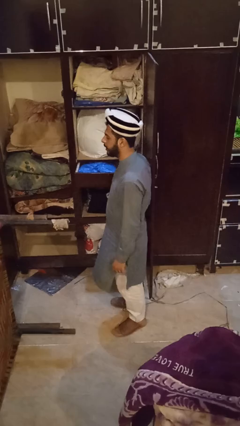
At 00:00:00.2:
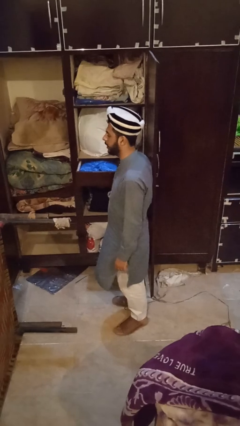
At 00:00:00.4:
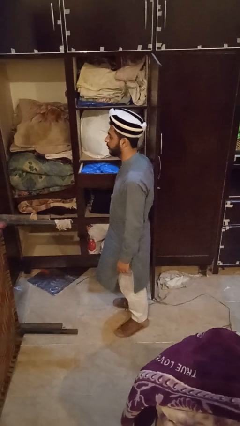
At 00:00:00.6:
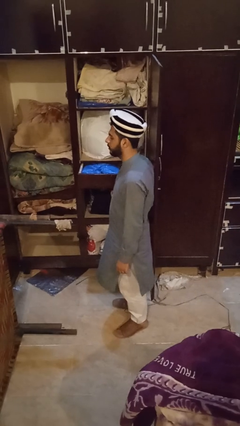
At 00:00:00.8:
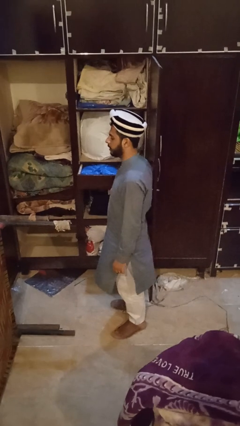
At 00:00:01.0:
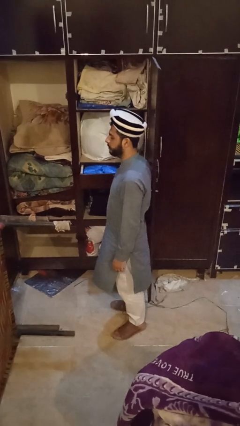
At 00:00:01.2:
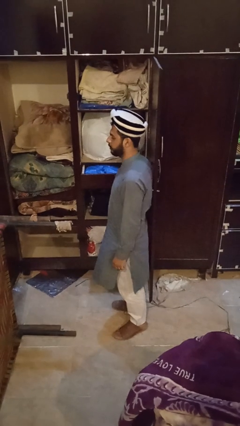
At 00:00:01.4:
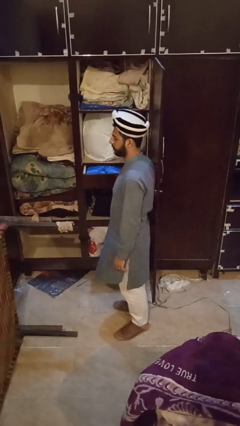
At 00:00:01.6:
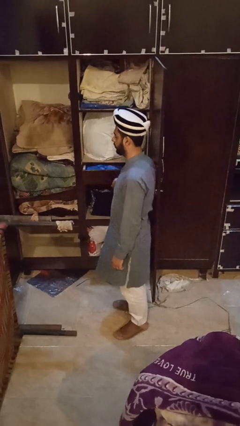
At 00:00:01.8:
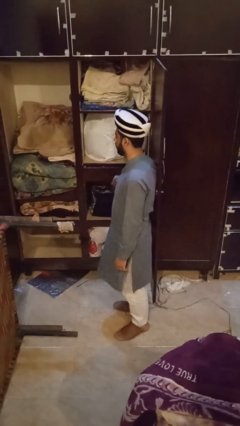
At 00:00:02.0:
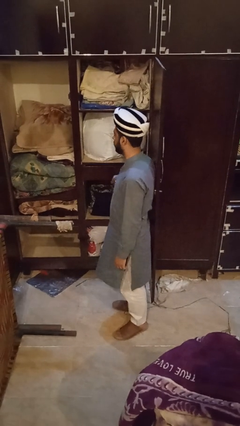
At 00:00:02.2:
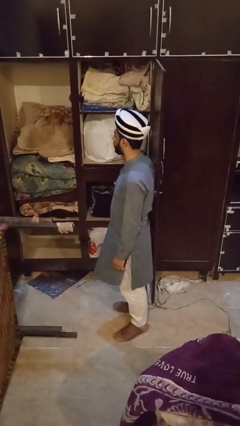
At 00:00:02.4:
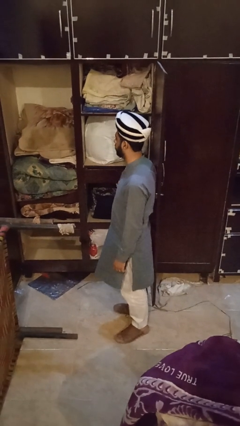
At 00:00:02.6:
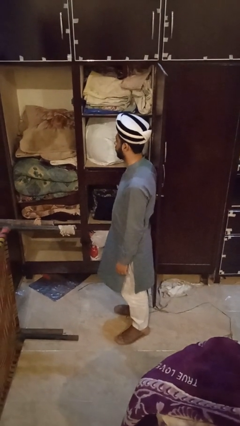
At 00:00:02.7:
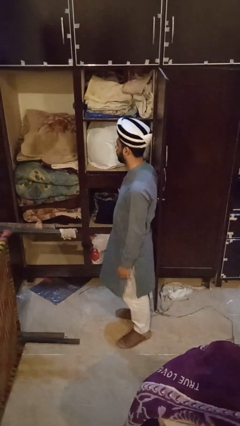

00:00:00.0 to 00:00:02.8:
person closes dresser drawer

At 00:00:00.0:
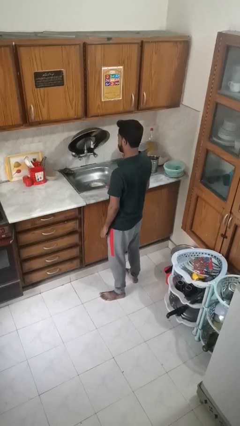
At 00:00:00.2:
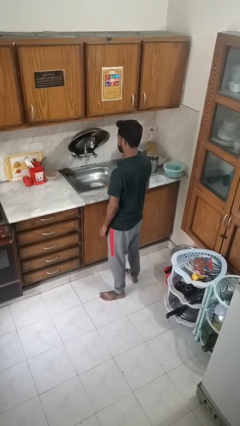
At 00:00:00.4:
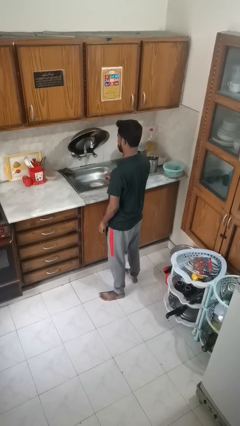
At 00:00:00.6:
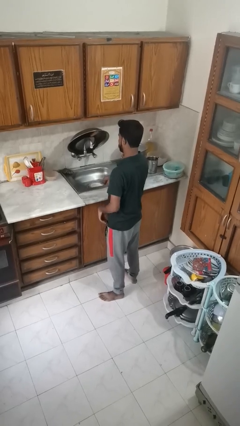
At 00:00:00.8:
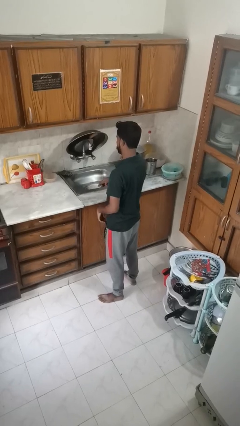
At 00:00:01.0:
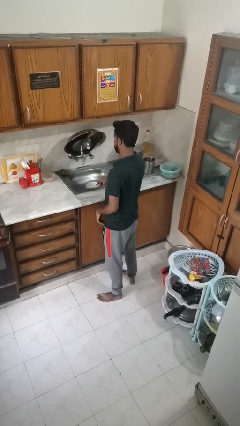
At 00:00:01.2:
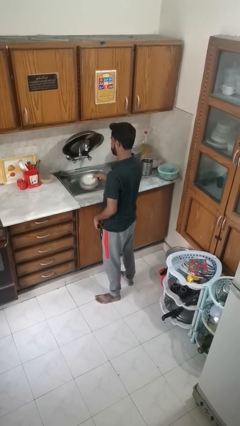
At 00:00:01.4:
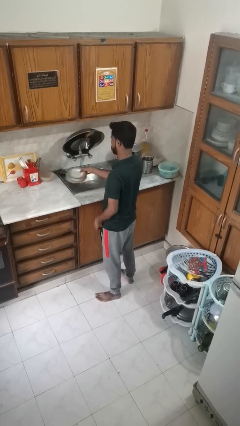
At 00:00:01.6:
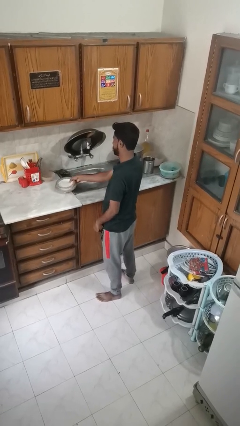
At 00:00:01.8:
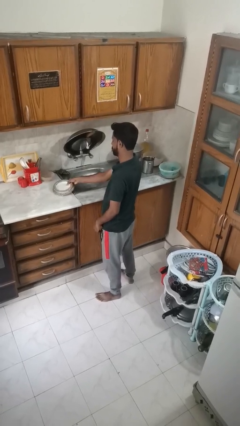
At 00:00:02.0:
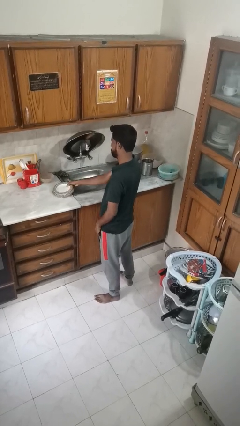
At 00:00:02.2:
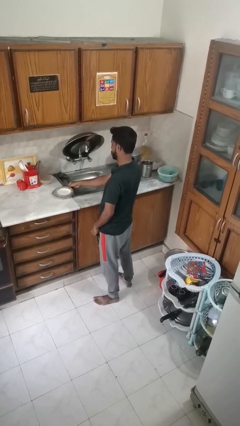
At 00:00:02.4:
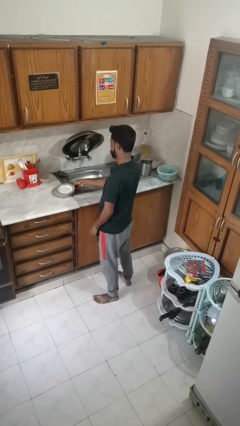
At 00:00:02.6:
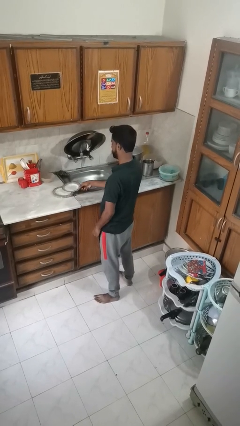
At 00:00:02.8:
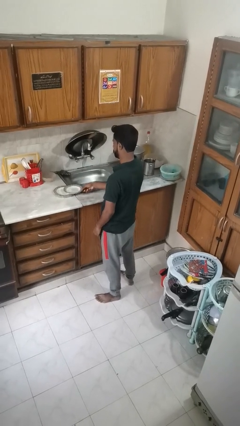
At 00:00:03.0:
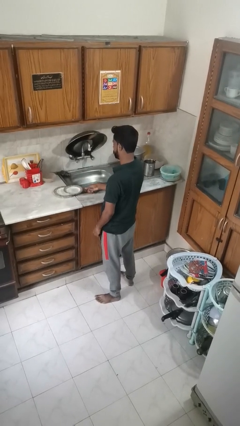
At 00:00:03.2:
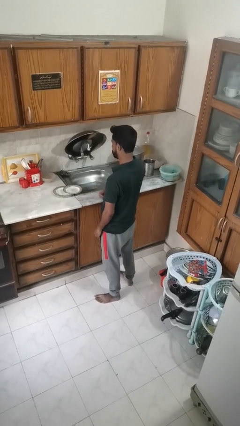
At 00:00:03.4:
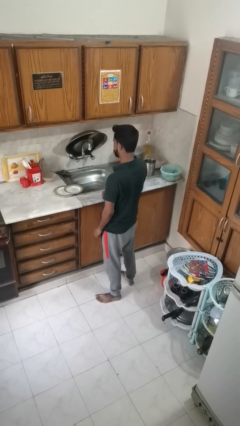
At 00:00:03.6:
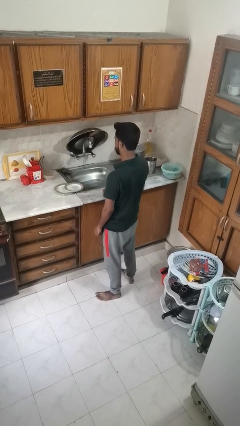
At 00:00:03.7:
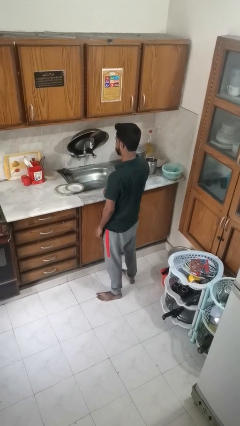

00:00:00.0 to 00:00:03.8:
person closes dishwasher

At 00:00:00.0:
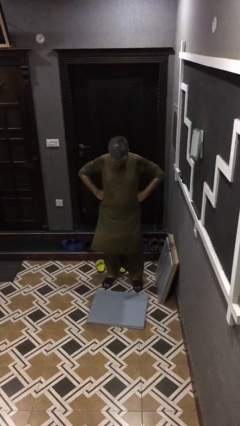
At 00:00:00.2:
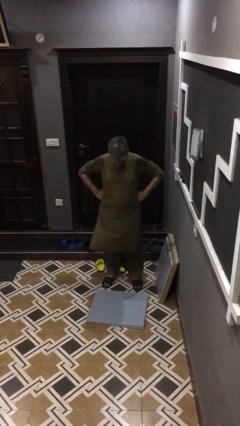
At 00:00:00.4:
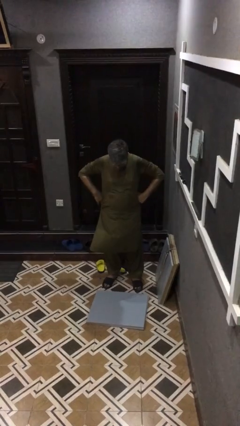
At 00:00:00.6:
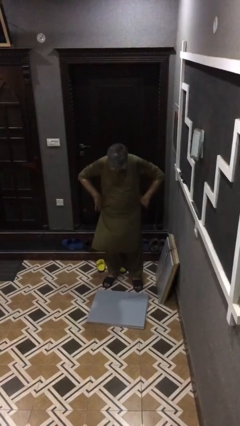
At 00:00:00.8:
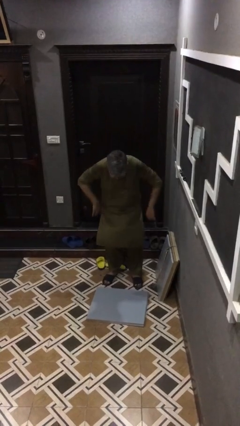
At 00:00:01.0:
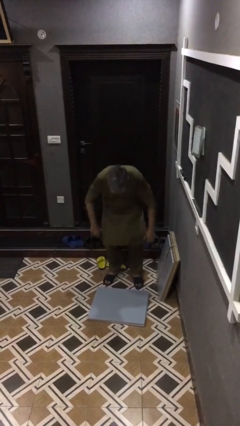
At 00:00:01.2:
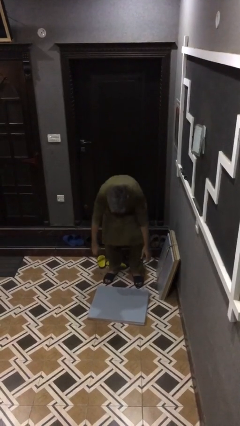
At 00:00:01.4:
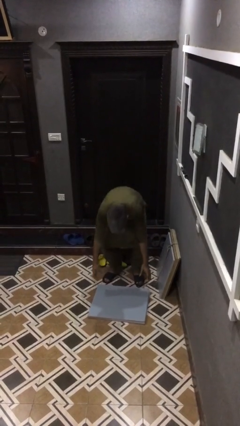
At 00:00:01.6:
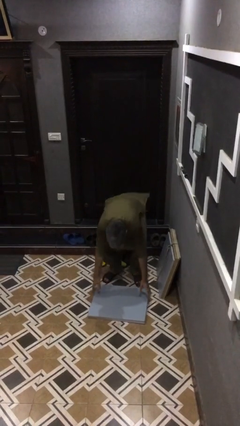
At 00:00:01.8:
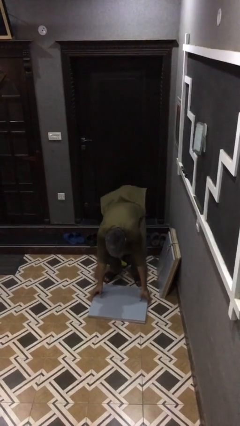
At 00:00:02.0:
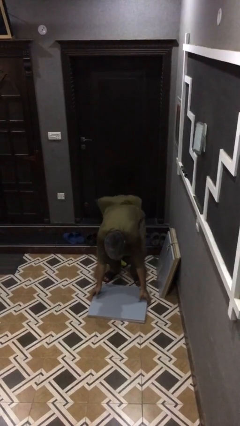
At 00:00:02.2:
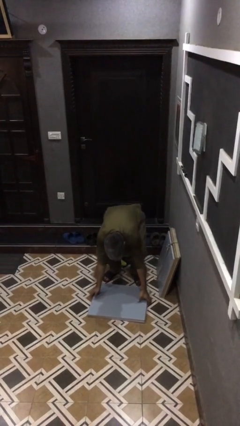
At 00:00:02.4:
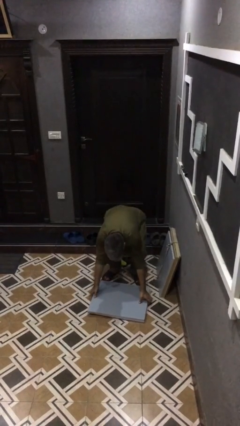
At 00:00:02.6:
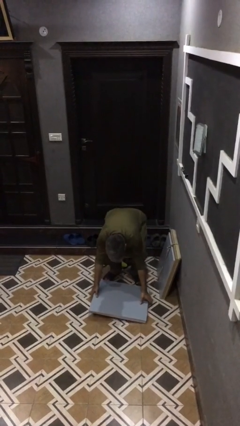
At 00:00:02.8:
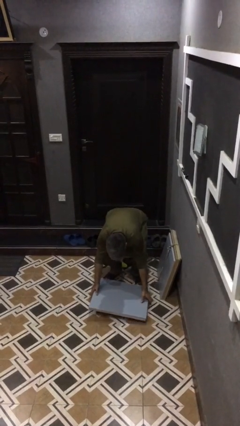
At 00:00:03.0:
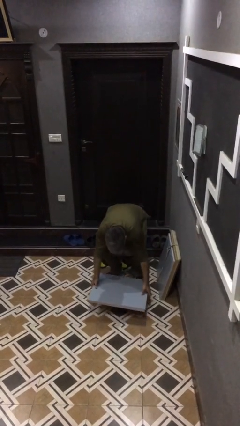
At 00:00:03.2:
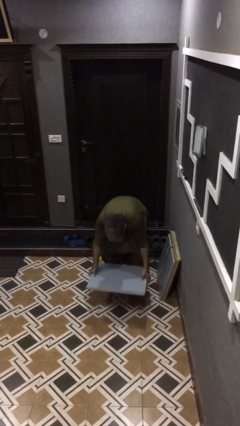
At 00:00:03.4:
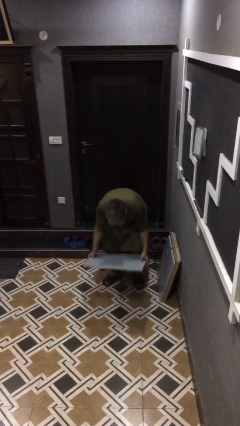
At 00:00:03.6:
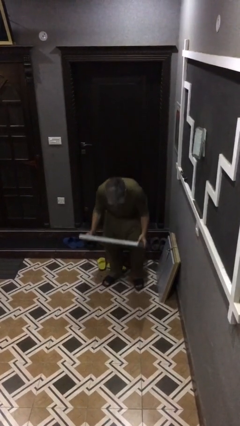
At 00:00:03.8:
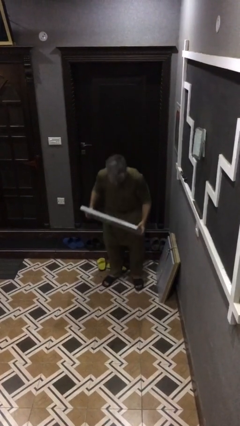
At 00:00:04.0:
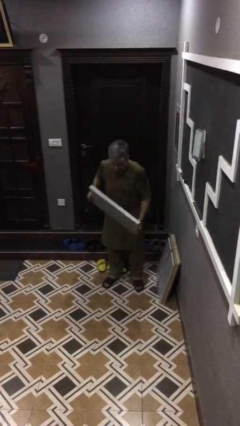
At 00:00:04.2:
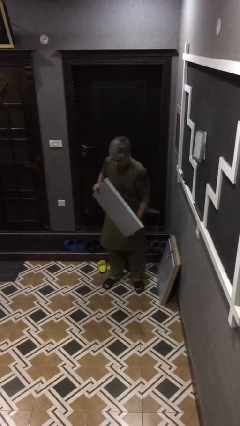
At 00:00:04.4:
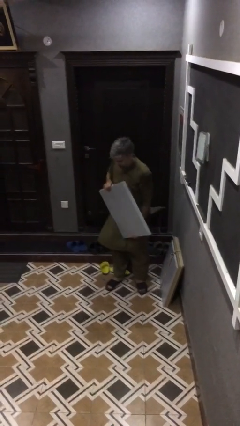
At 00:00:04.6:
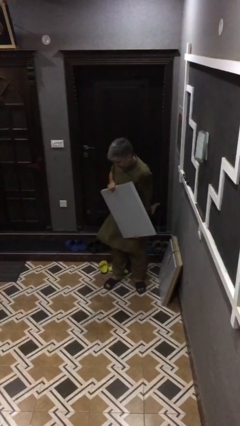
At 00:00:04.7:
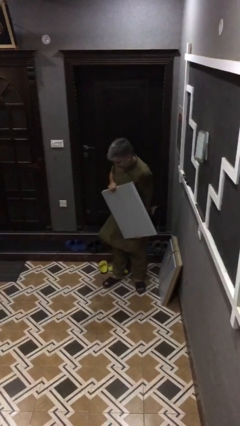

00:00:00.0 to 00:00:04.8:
person picks up object from floor

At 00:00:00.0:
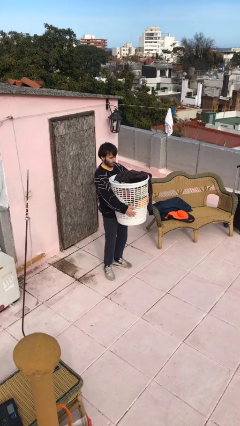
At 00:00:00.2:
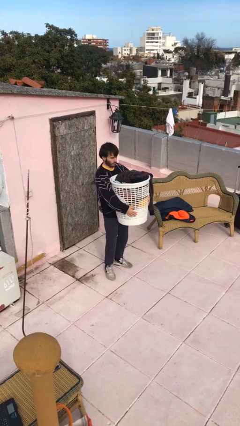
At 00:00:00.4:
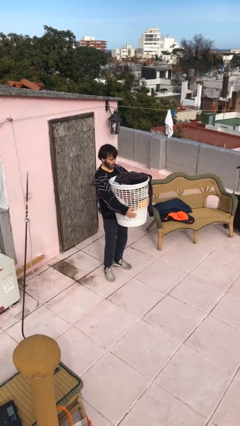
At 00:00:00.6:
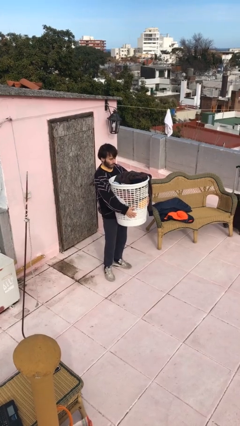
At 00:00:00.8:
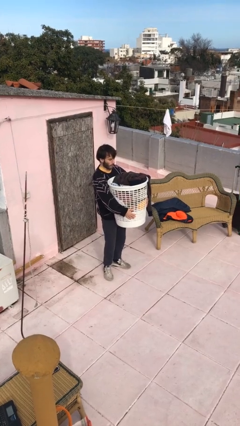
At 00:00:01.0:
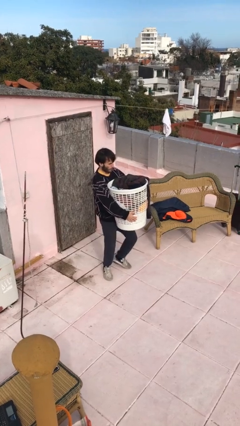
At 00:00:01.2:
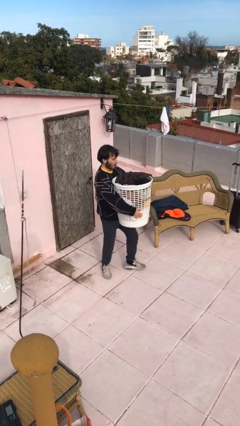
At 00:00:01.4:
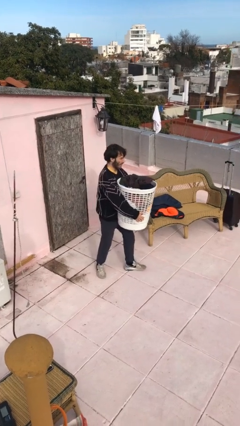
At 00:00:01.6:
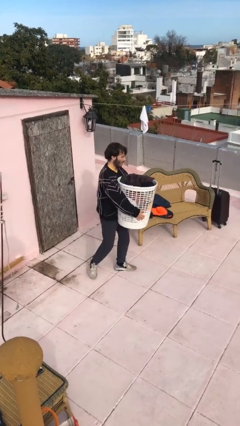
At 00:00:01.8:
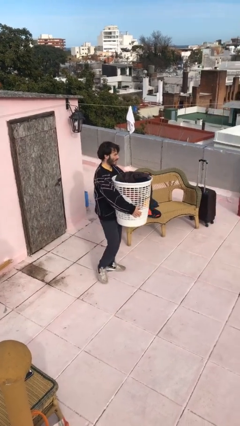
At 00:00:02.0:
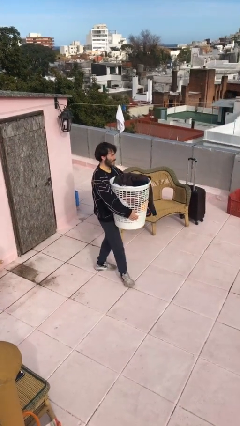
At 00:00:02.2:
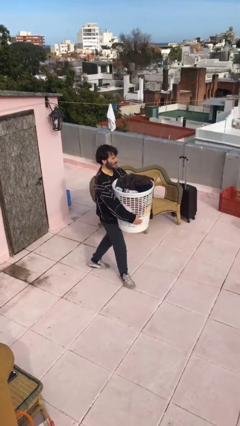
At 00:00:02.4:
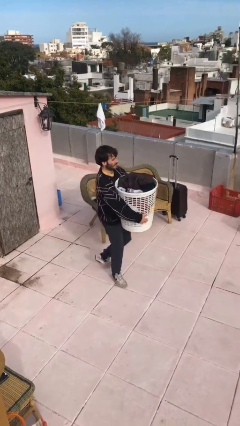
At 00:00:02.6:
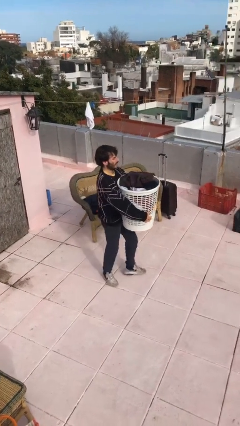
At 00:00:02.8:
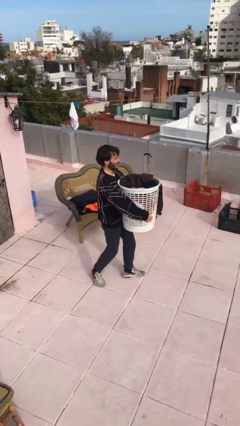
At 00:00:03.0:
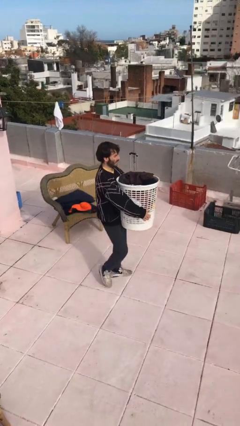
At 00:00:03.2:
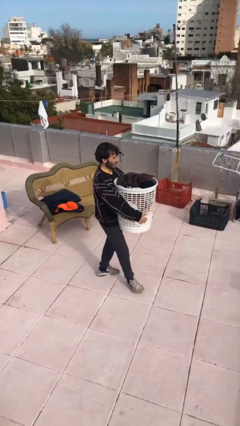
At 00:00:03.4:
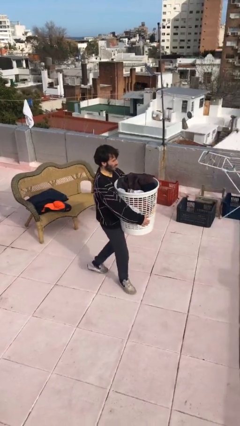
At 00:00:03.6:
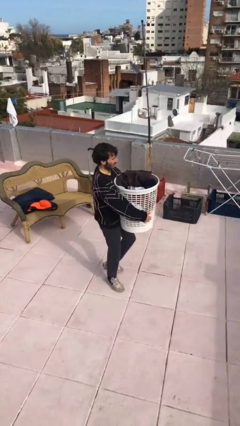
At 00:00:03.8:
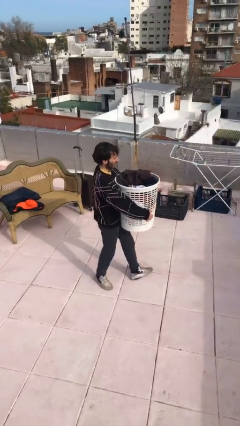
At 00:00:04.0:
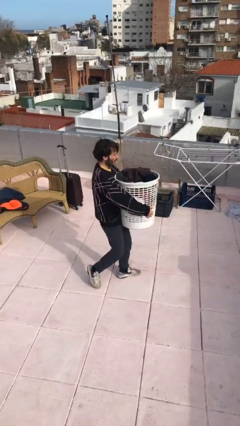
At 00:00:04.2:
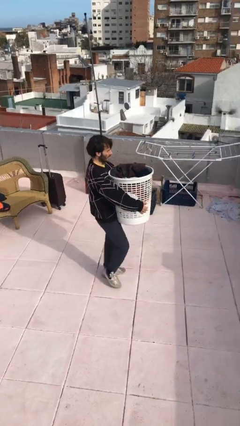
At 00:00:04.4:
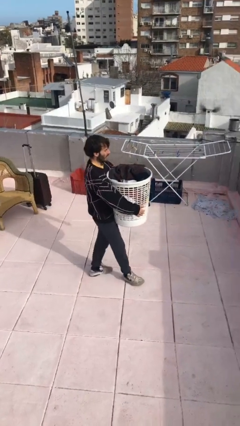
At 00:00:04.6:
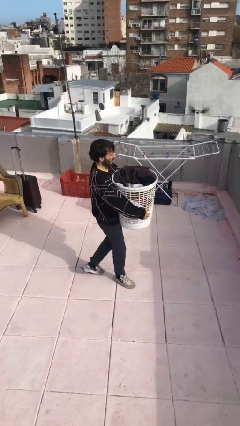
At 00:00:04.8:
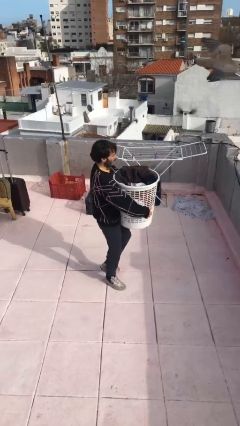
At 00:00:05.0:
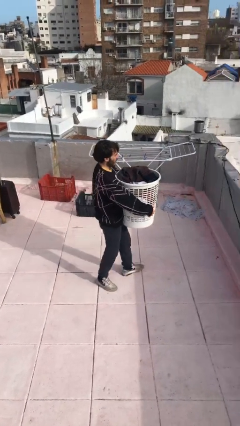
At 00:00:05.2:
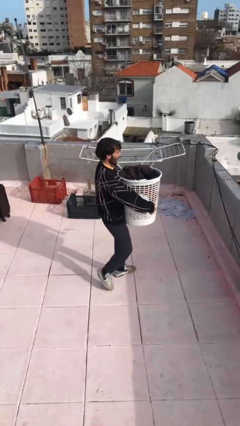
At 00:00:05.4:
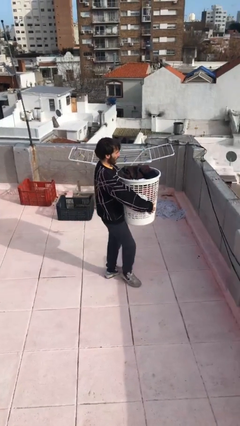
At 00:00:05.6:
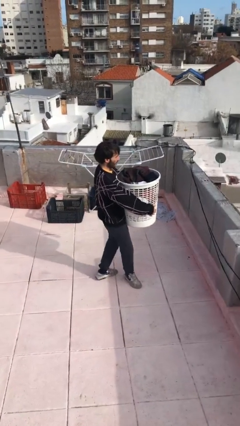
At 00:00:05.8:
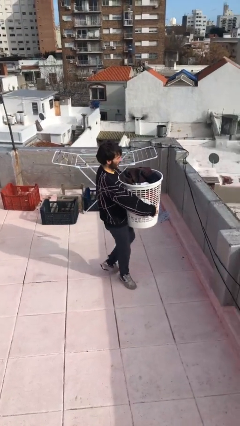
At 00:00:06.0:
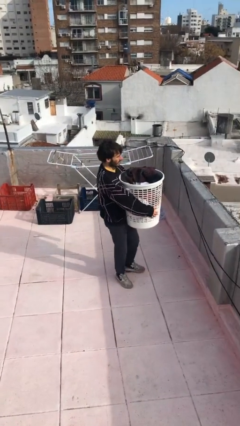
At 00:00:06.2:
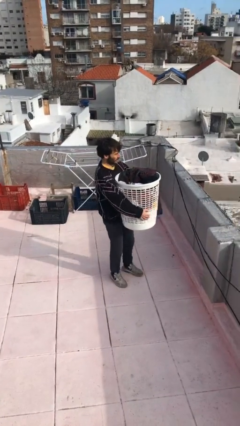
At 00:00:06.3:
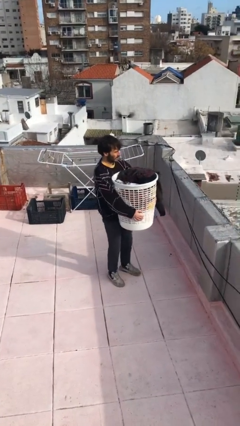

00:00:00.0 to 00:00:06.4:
person carries laundry basket
